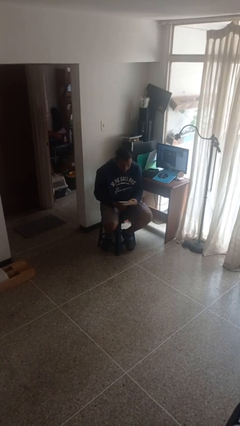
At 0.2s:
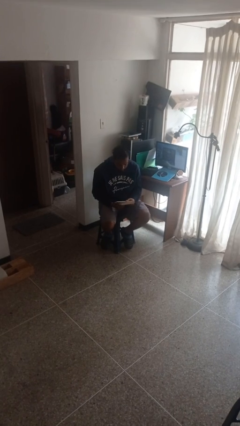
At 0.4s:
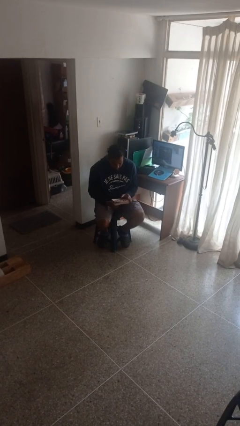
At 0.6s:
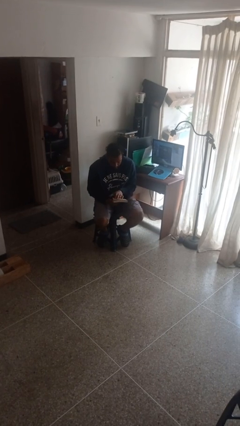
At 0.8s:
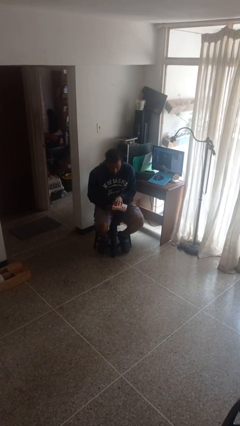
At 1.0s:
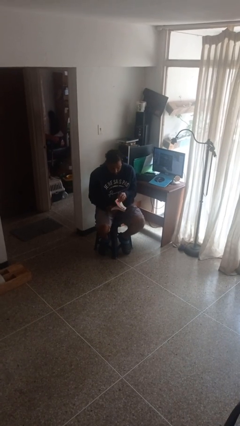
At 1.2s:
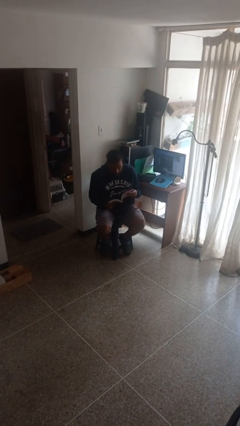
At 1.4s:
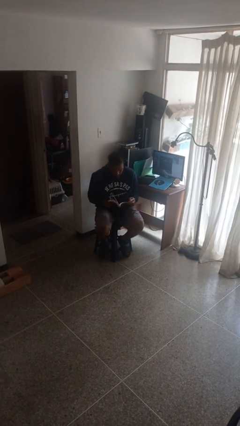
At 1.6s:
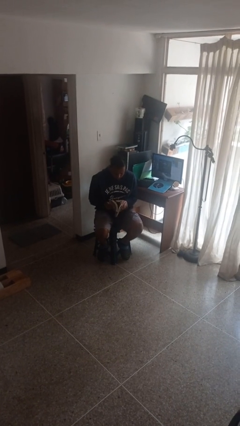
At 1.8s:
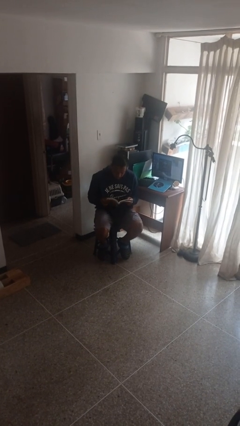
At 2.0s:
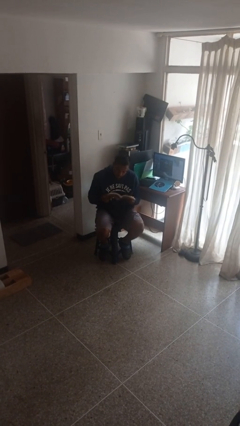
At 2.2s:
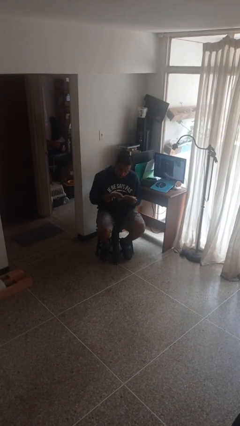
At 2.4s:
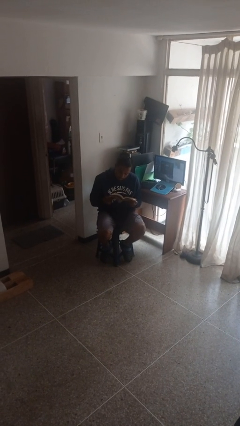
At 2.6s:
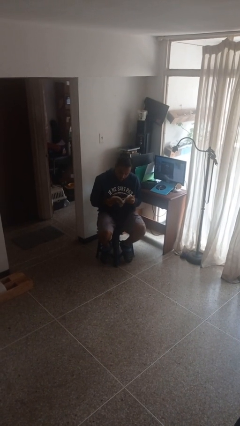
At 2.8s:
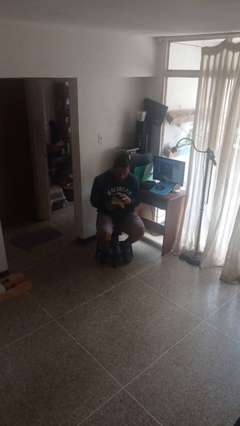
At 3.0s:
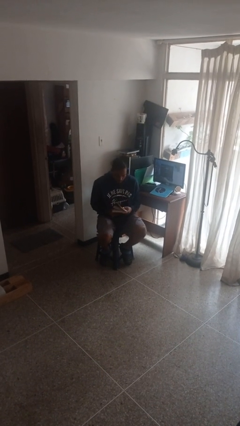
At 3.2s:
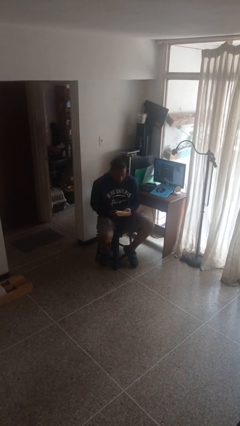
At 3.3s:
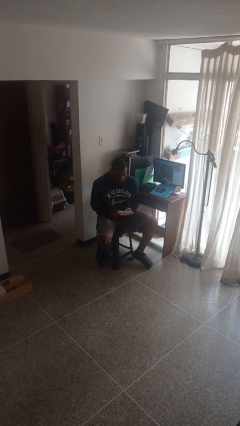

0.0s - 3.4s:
person reads book

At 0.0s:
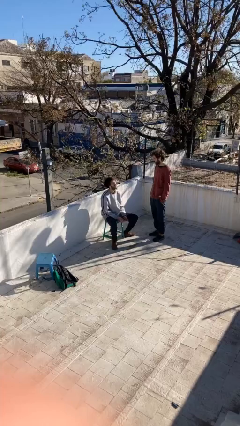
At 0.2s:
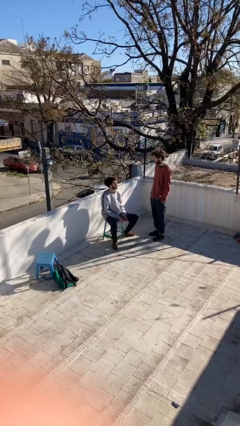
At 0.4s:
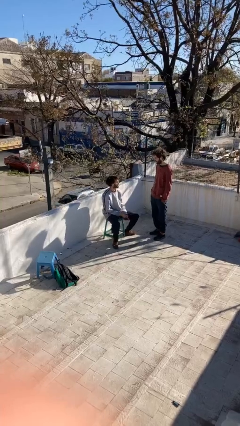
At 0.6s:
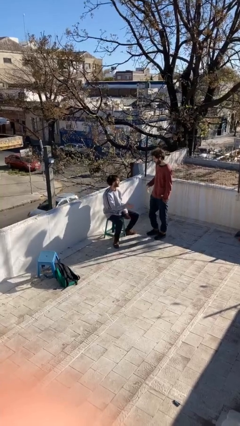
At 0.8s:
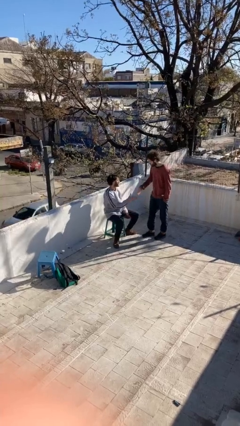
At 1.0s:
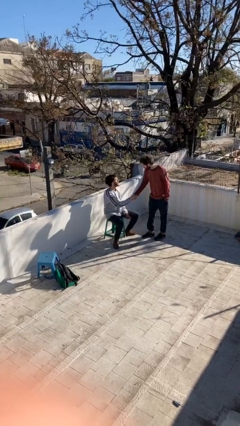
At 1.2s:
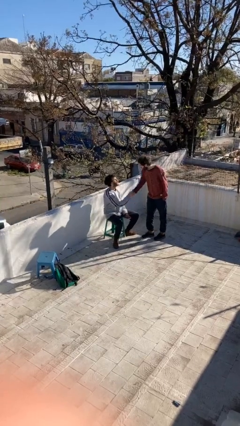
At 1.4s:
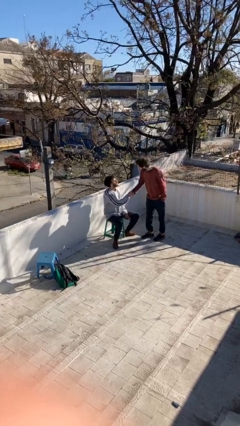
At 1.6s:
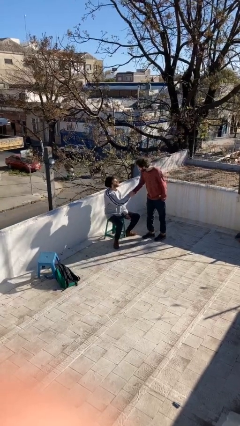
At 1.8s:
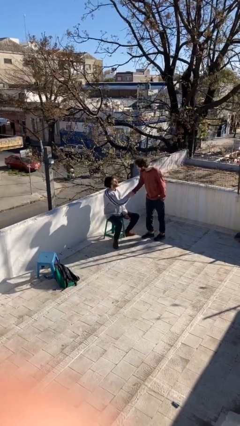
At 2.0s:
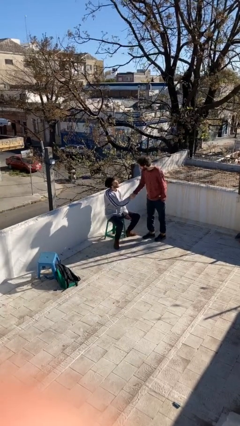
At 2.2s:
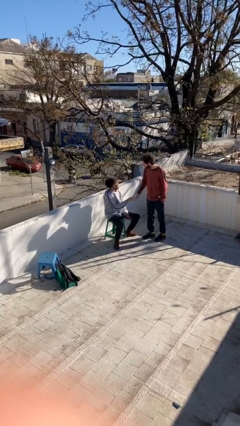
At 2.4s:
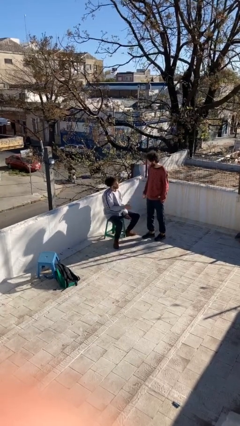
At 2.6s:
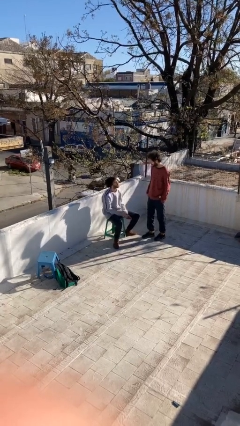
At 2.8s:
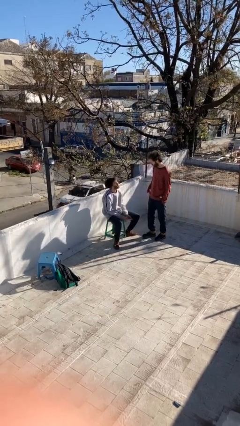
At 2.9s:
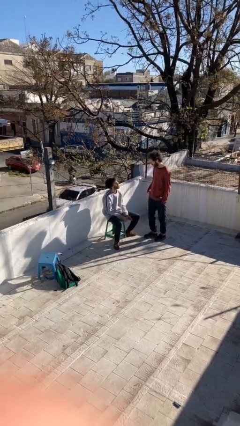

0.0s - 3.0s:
person shakes hand

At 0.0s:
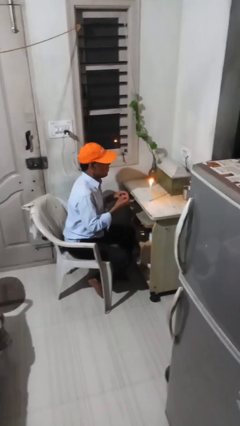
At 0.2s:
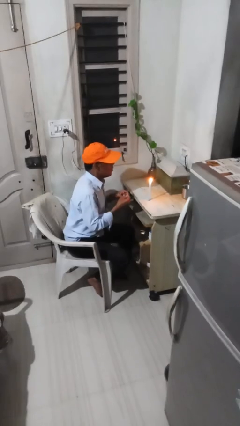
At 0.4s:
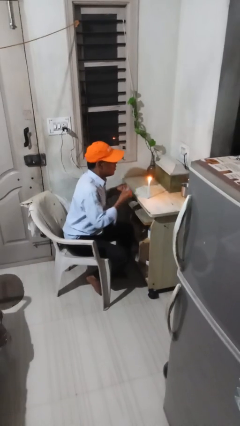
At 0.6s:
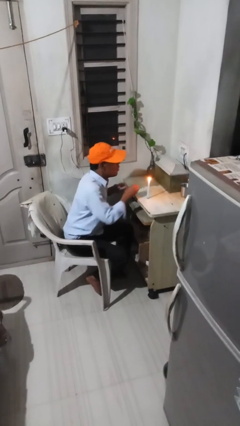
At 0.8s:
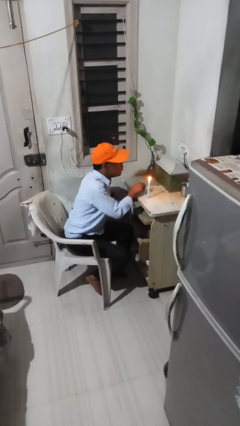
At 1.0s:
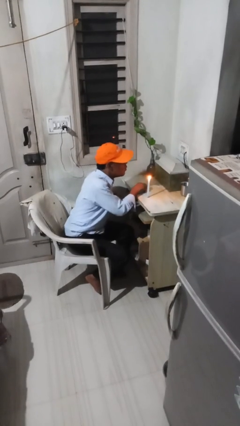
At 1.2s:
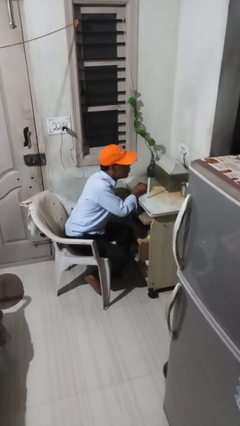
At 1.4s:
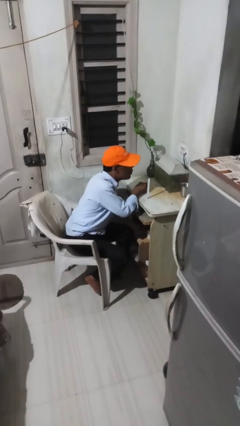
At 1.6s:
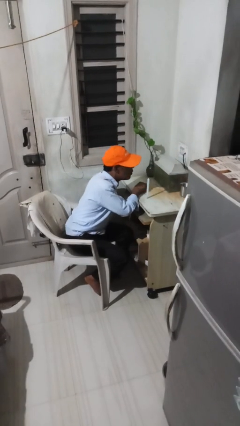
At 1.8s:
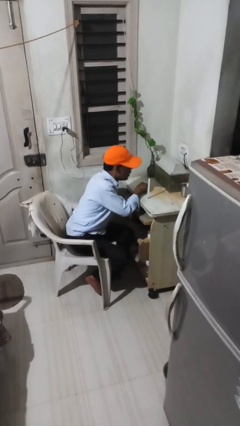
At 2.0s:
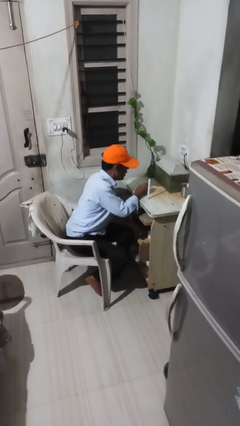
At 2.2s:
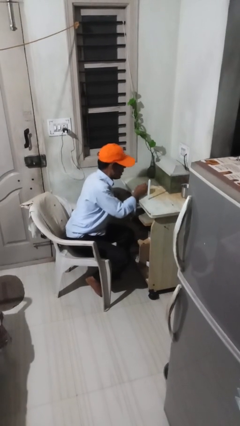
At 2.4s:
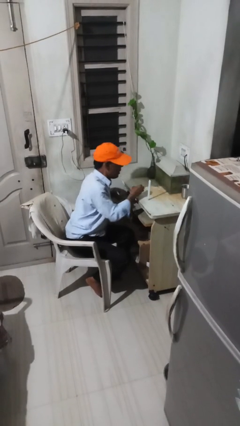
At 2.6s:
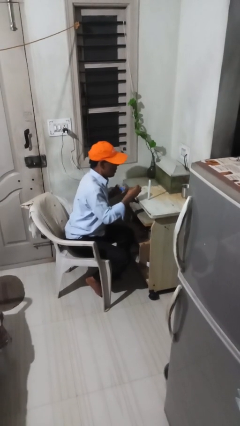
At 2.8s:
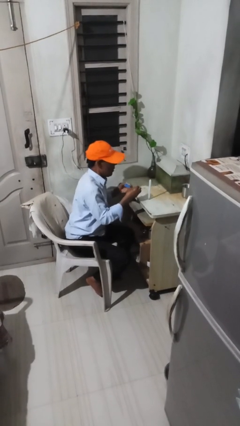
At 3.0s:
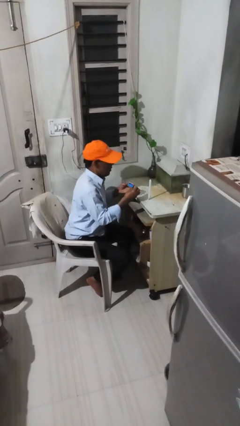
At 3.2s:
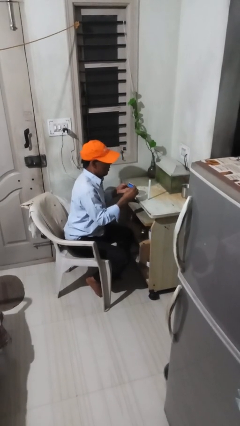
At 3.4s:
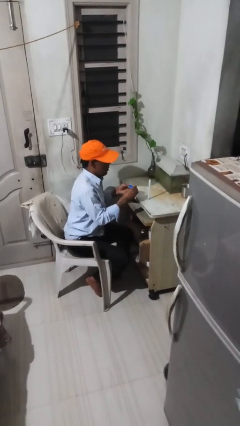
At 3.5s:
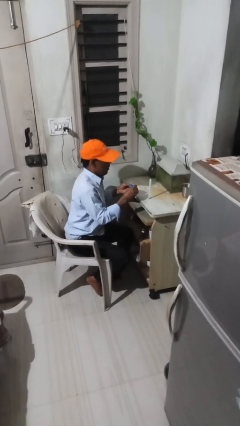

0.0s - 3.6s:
person extinguishes candle

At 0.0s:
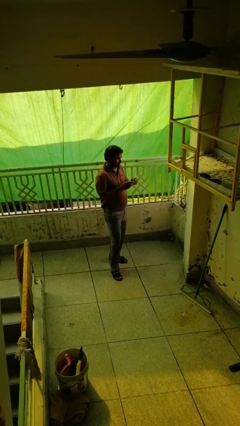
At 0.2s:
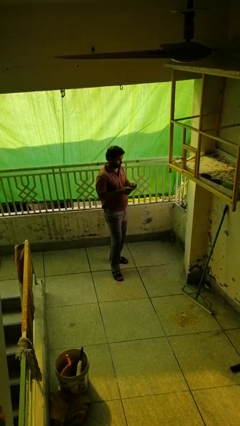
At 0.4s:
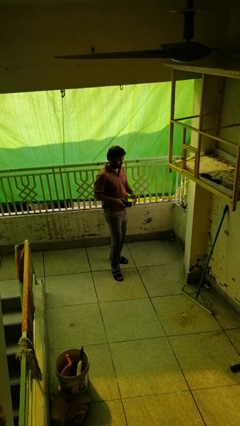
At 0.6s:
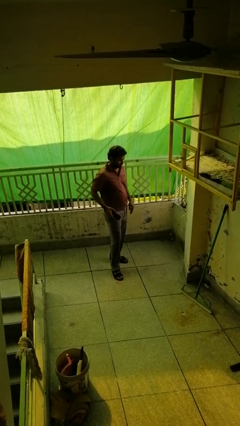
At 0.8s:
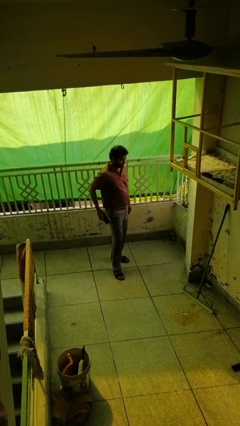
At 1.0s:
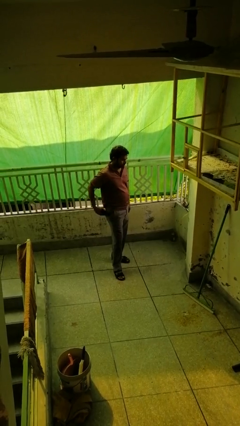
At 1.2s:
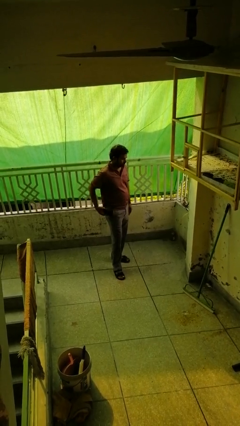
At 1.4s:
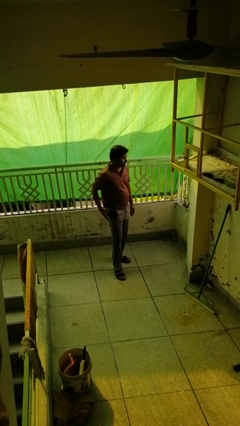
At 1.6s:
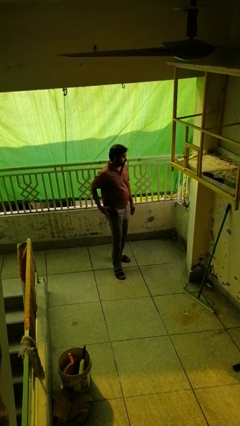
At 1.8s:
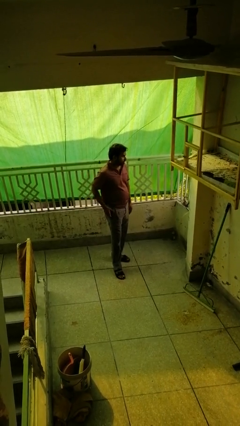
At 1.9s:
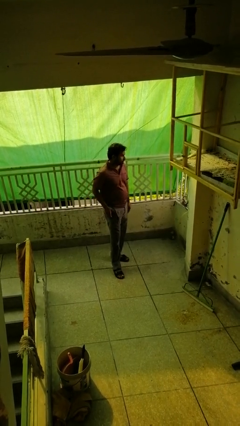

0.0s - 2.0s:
person puts phone into pocket

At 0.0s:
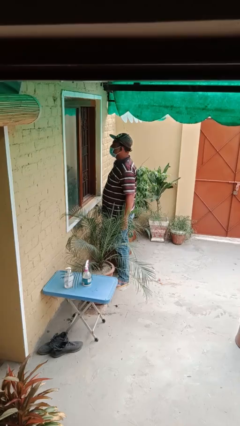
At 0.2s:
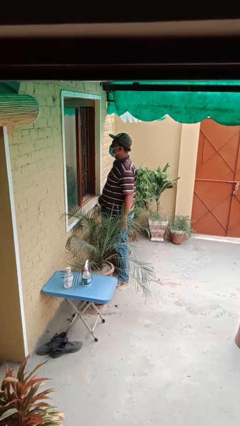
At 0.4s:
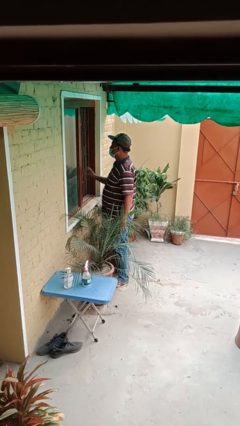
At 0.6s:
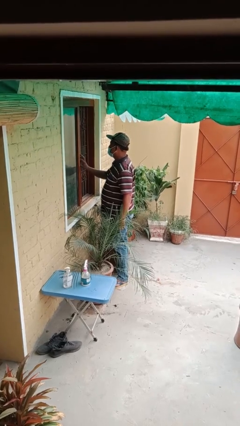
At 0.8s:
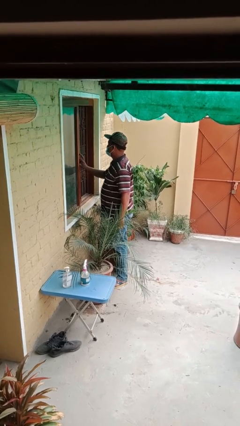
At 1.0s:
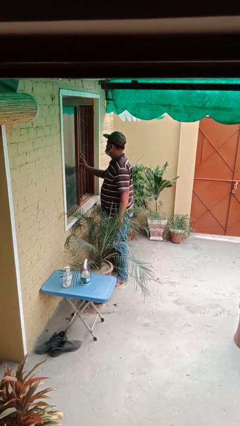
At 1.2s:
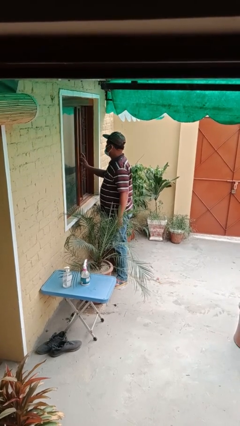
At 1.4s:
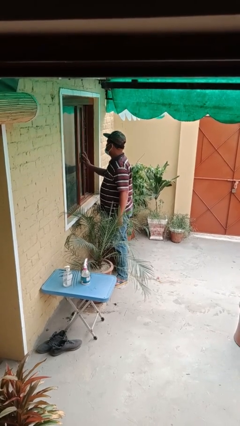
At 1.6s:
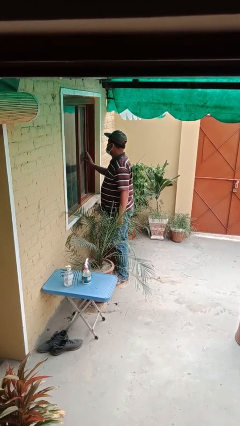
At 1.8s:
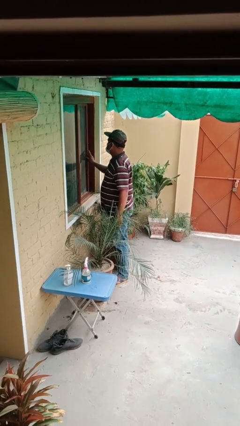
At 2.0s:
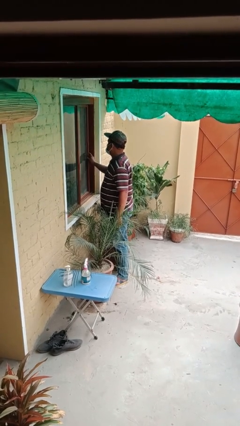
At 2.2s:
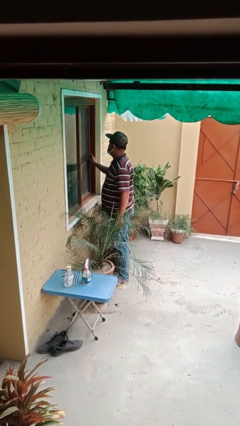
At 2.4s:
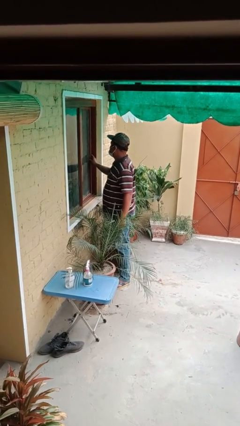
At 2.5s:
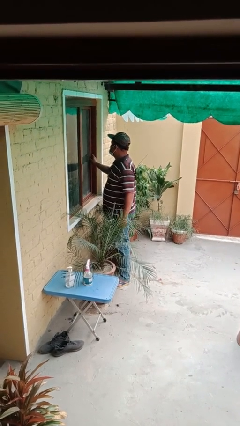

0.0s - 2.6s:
person closes home window

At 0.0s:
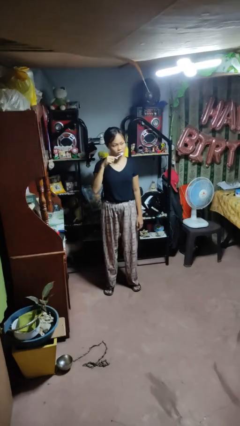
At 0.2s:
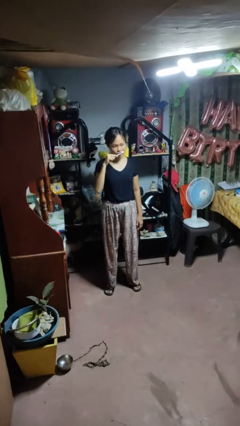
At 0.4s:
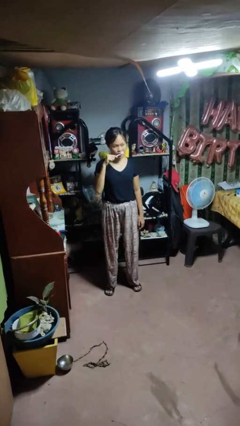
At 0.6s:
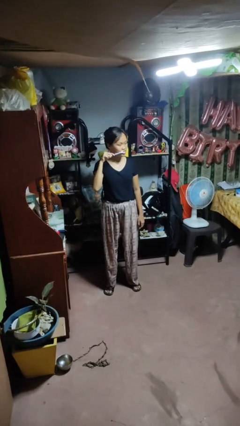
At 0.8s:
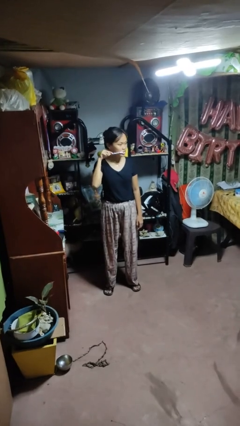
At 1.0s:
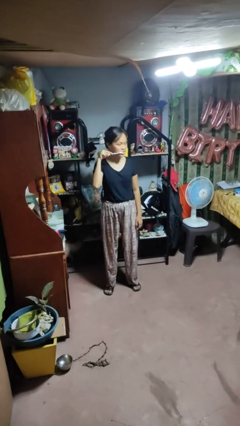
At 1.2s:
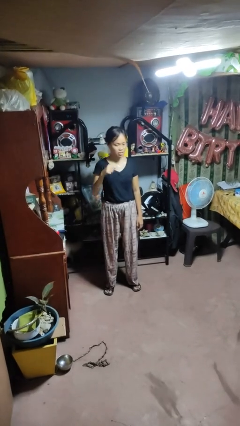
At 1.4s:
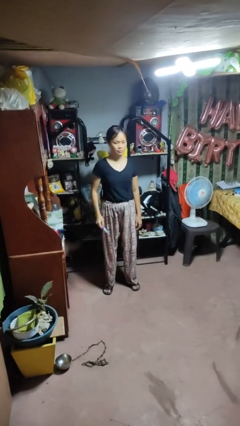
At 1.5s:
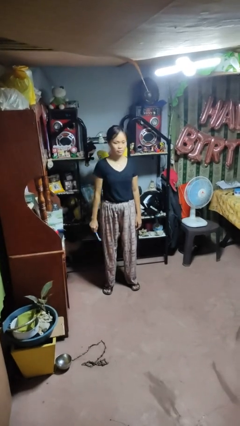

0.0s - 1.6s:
person brushes teeth

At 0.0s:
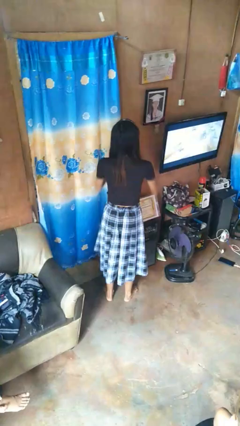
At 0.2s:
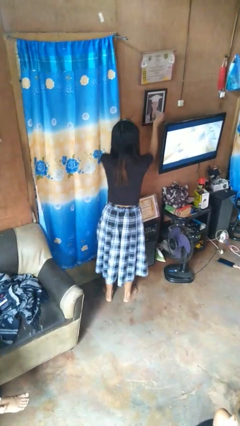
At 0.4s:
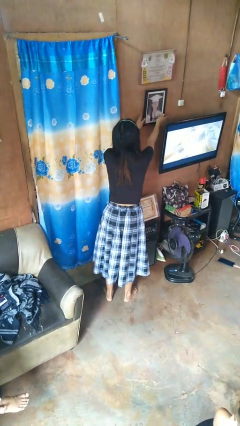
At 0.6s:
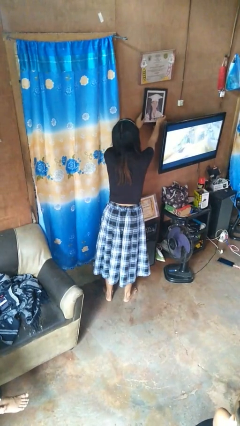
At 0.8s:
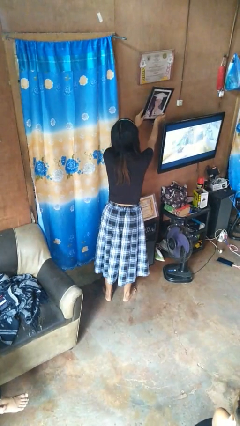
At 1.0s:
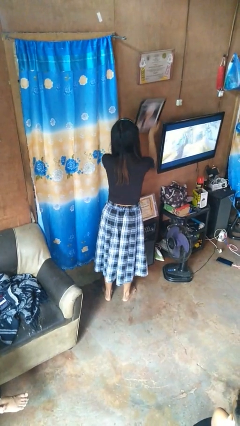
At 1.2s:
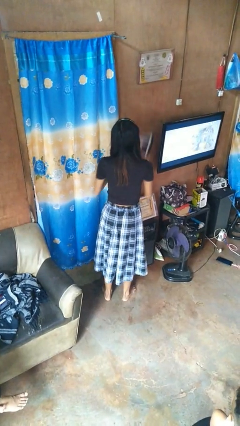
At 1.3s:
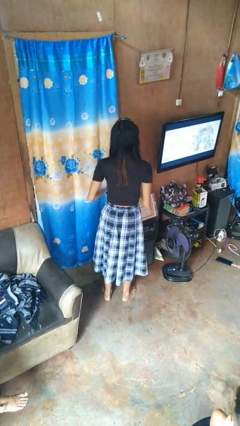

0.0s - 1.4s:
person takes down picture frame
